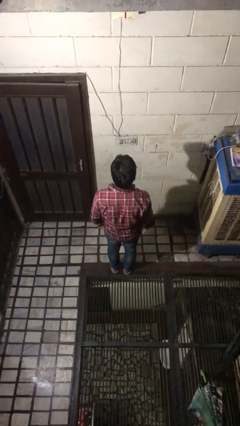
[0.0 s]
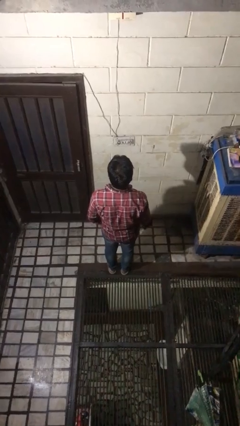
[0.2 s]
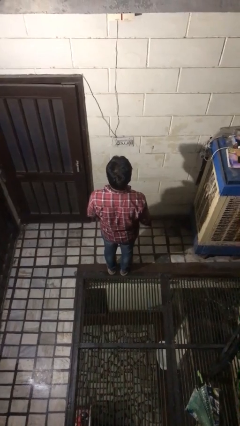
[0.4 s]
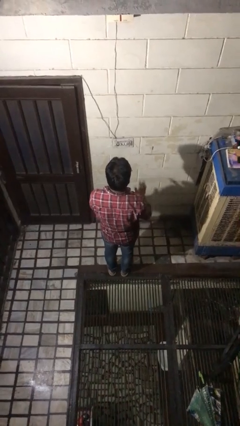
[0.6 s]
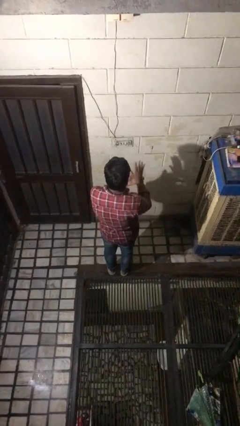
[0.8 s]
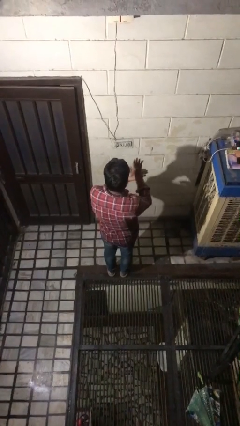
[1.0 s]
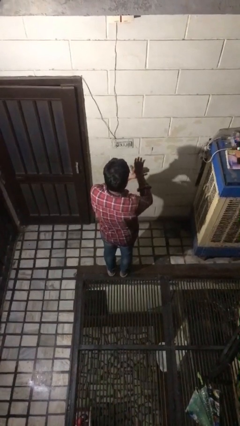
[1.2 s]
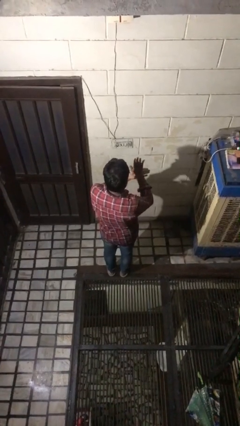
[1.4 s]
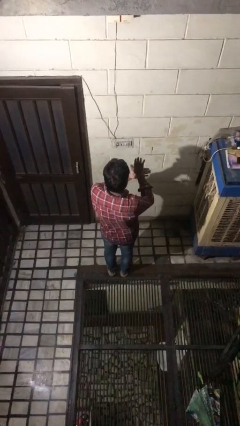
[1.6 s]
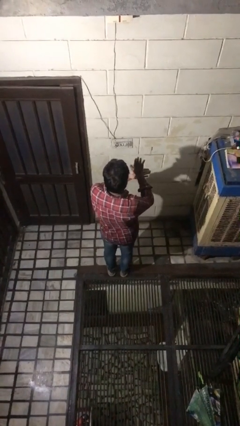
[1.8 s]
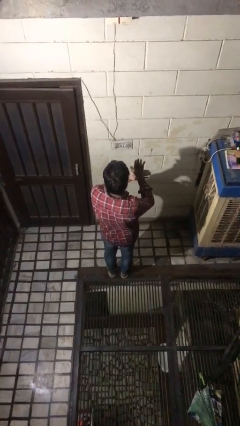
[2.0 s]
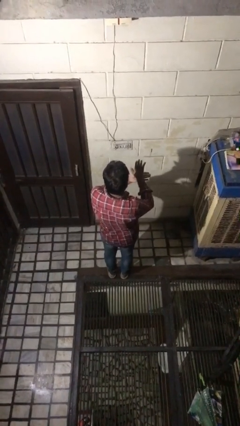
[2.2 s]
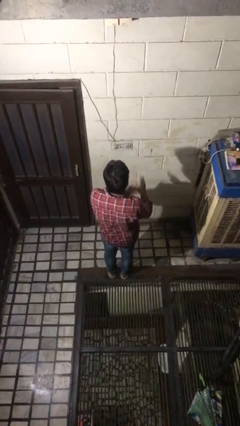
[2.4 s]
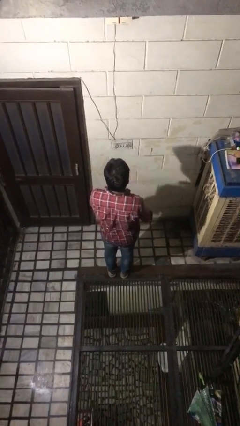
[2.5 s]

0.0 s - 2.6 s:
person gestures number five

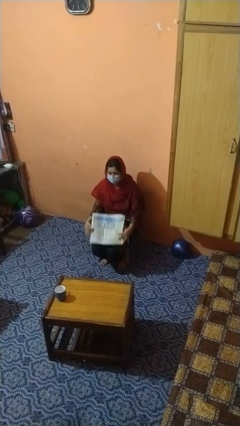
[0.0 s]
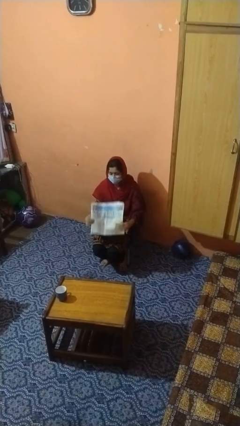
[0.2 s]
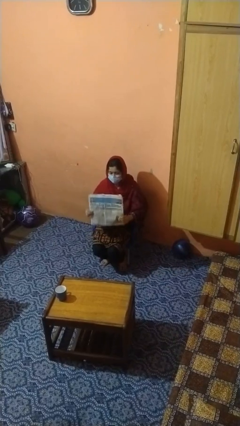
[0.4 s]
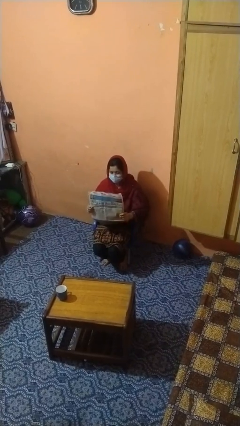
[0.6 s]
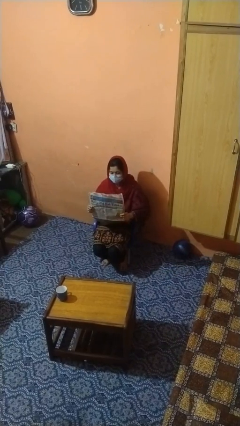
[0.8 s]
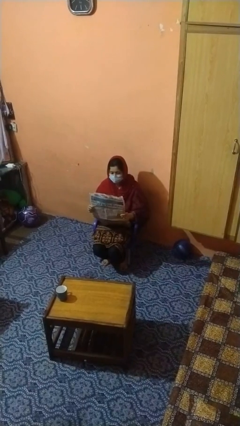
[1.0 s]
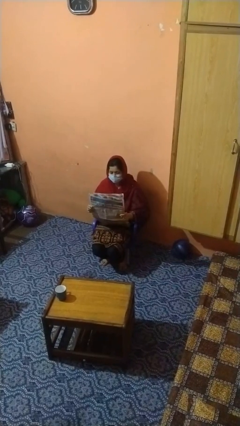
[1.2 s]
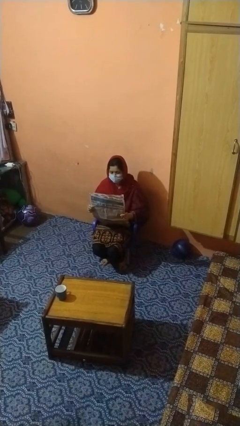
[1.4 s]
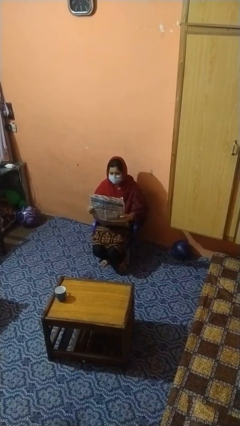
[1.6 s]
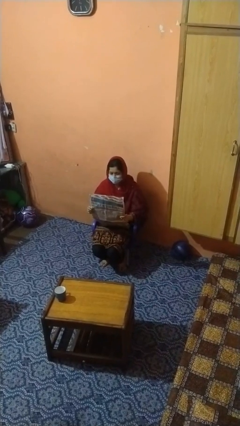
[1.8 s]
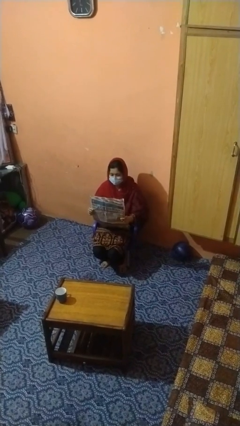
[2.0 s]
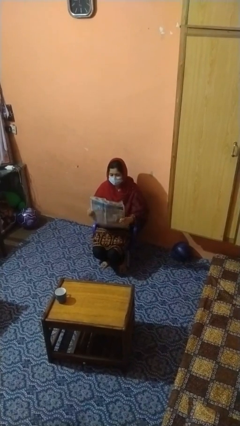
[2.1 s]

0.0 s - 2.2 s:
person reads newspaper

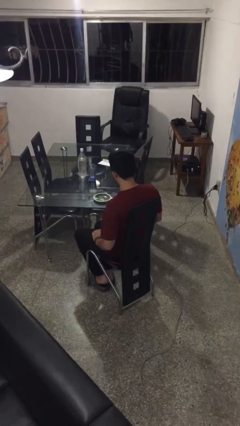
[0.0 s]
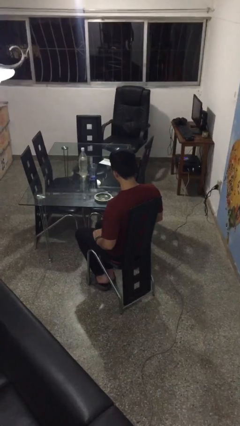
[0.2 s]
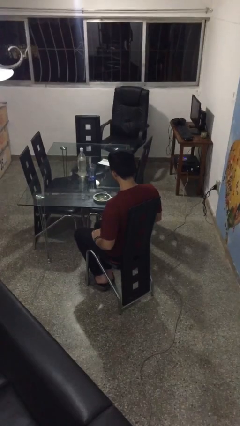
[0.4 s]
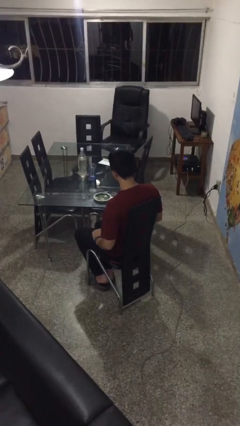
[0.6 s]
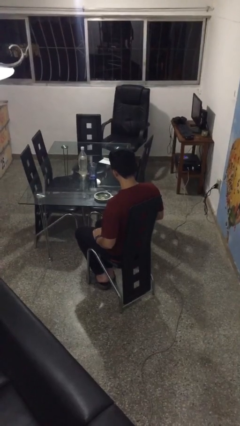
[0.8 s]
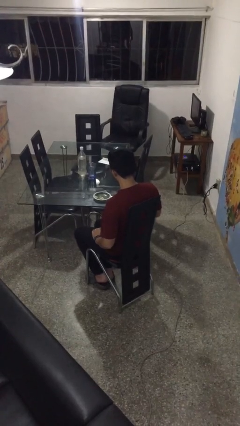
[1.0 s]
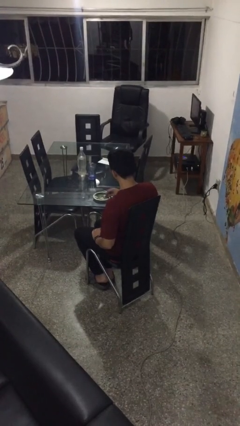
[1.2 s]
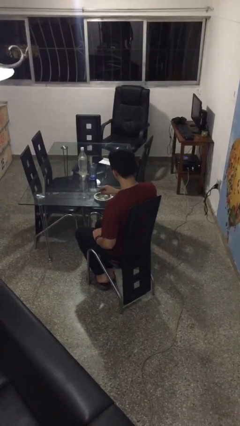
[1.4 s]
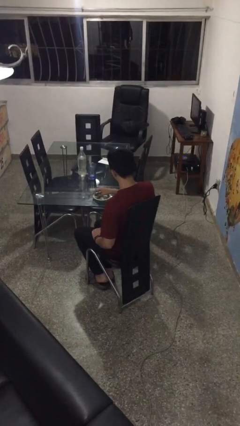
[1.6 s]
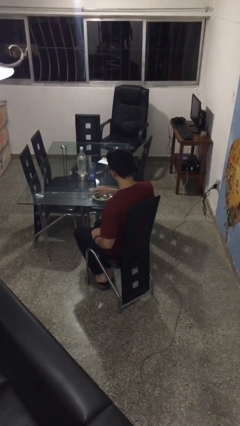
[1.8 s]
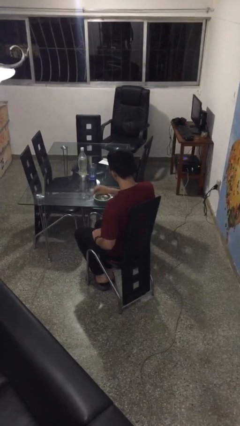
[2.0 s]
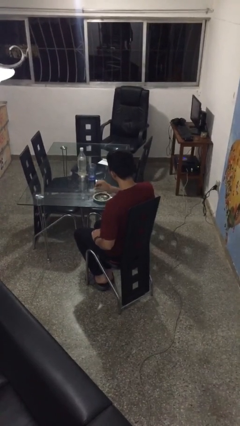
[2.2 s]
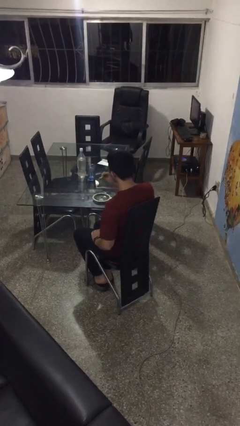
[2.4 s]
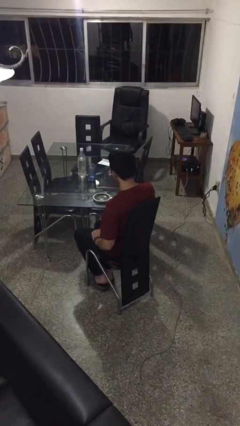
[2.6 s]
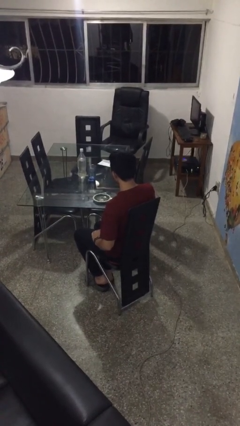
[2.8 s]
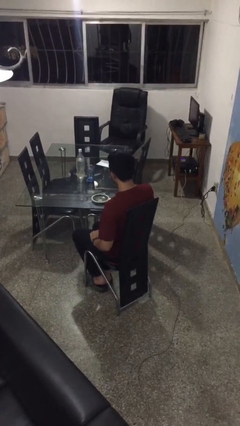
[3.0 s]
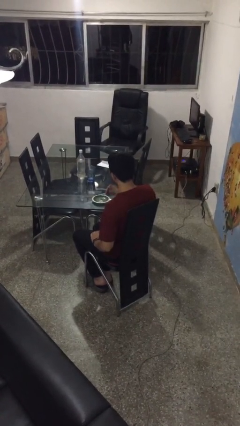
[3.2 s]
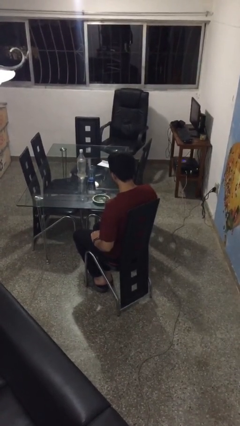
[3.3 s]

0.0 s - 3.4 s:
person eats with hands

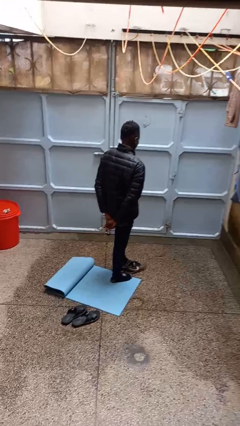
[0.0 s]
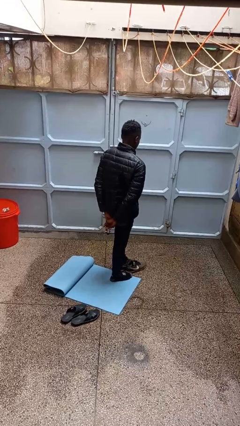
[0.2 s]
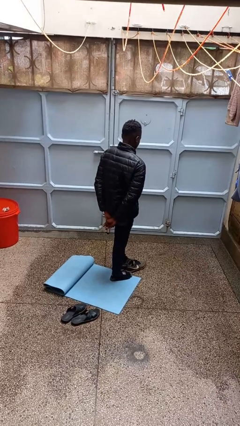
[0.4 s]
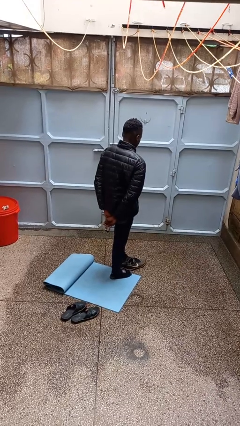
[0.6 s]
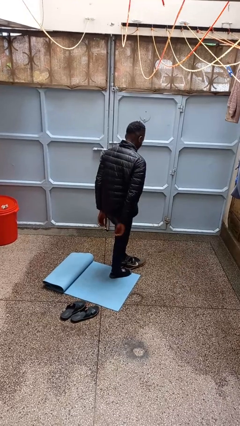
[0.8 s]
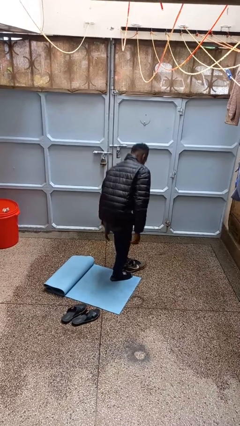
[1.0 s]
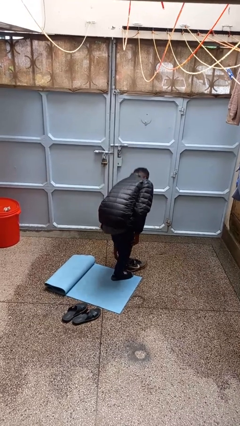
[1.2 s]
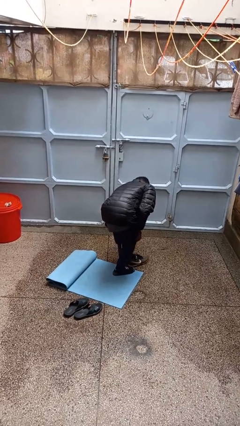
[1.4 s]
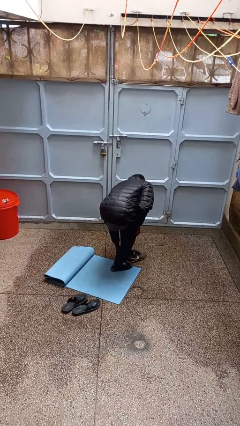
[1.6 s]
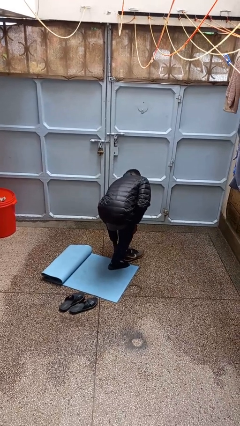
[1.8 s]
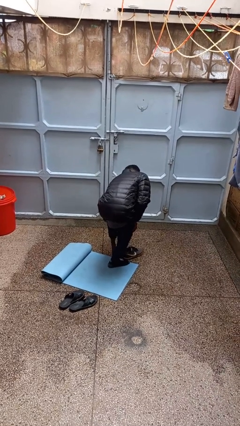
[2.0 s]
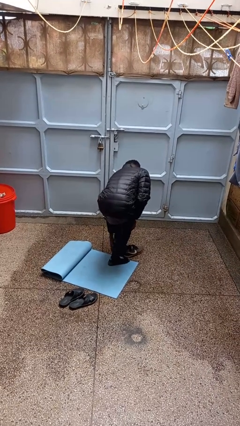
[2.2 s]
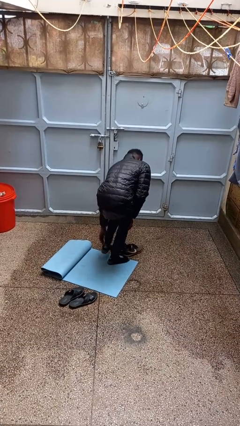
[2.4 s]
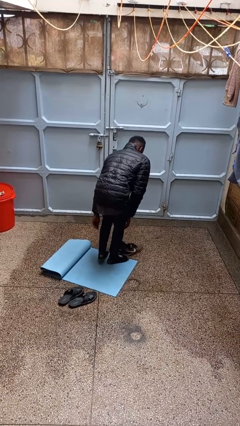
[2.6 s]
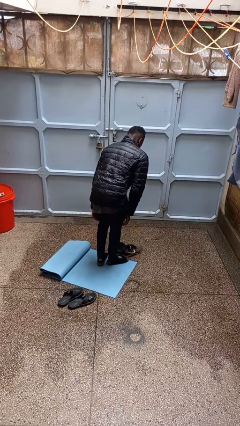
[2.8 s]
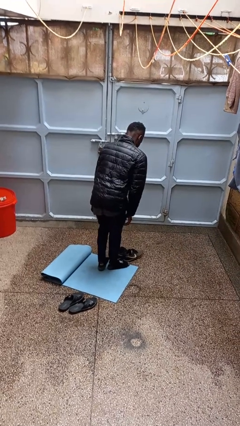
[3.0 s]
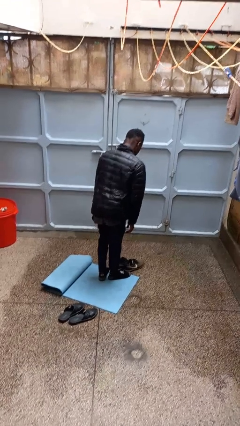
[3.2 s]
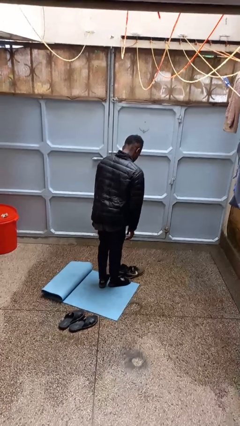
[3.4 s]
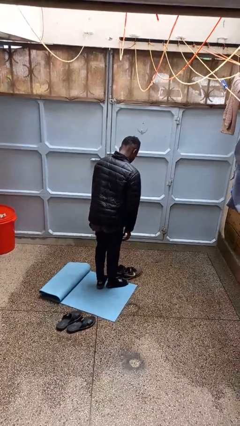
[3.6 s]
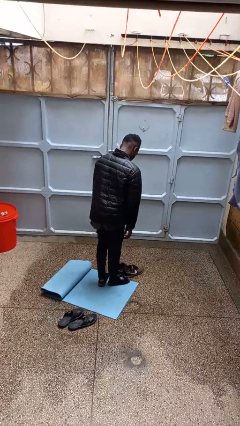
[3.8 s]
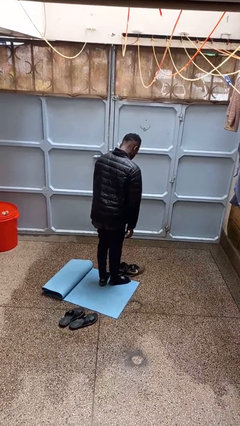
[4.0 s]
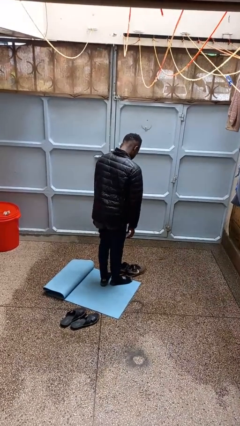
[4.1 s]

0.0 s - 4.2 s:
person takes off shoes

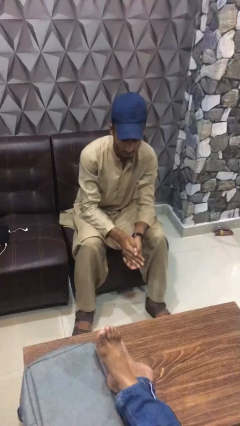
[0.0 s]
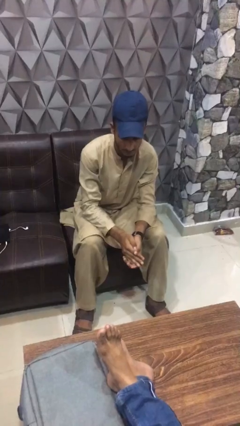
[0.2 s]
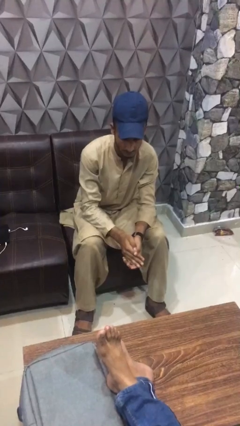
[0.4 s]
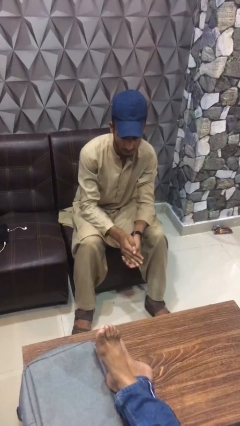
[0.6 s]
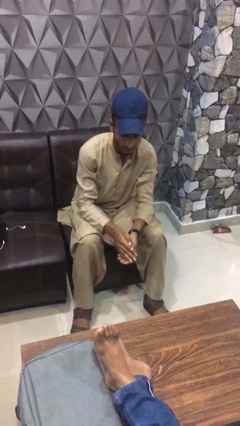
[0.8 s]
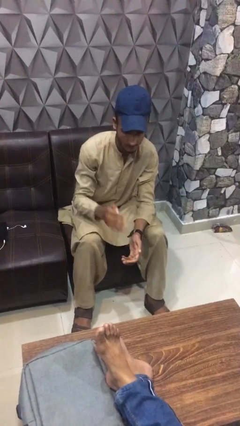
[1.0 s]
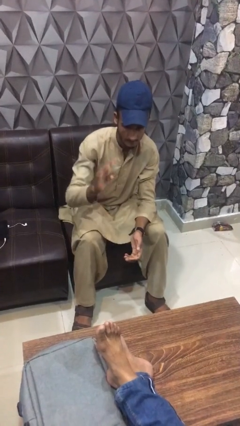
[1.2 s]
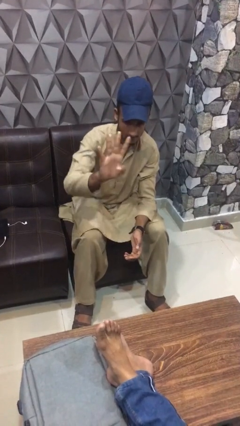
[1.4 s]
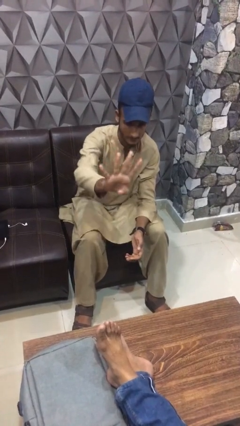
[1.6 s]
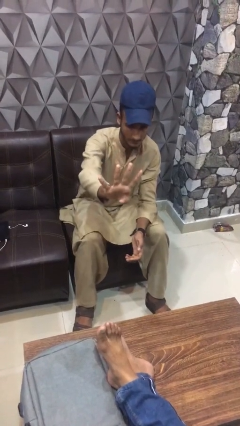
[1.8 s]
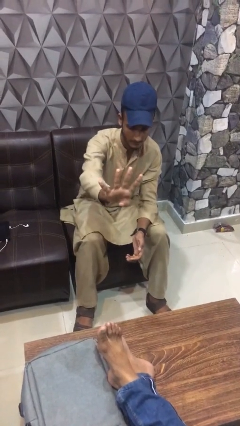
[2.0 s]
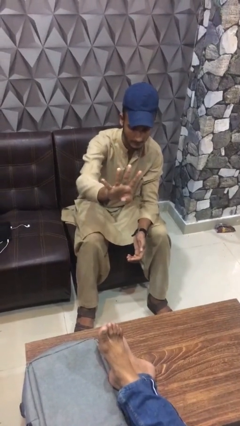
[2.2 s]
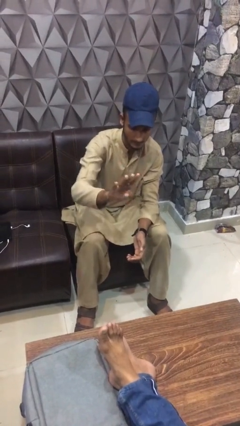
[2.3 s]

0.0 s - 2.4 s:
person gestures number four

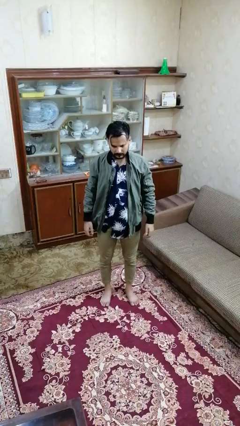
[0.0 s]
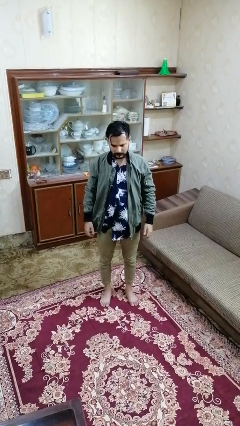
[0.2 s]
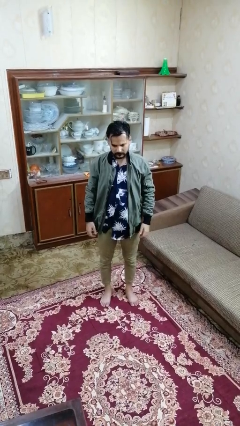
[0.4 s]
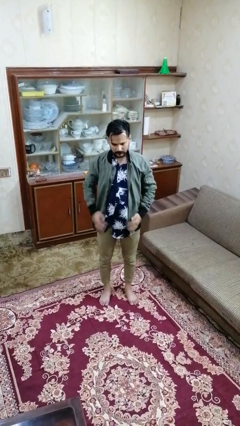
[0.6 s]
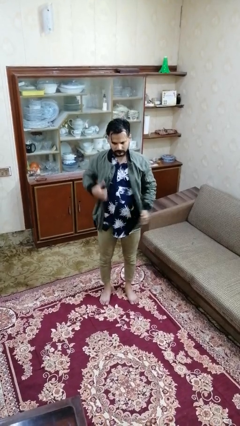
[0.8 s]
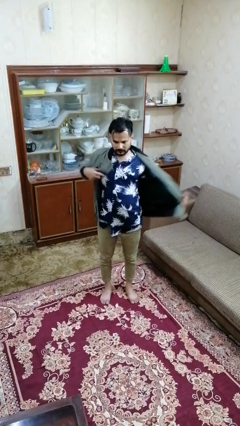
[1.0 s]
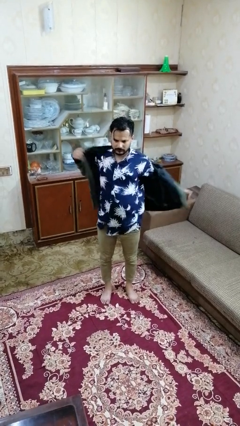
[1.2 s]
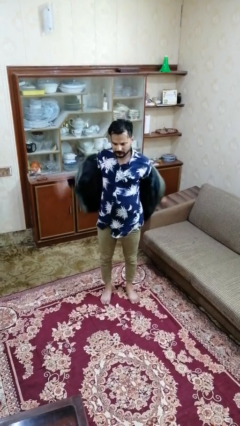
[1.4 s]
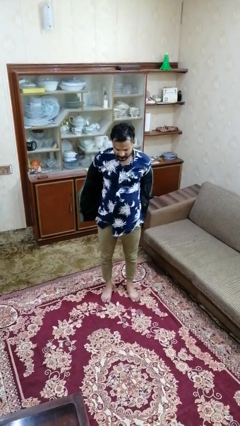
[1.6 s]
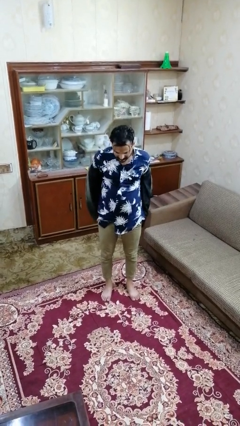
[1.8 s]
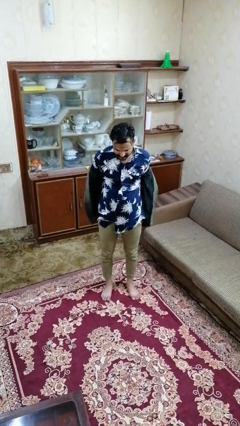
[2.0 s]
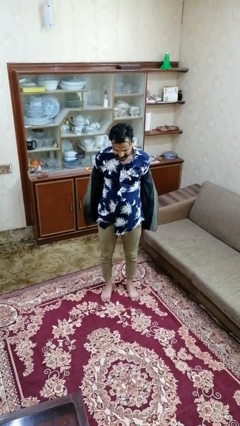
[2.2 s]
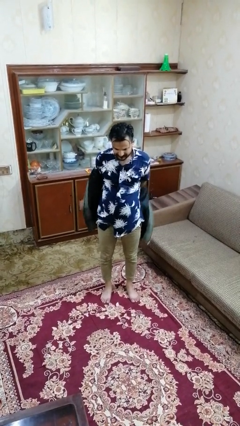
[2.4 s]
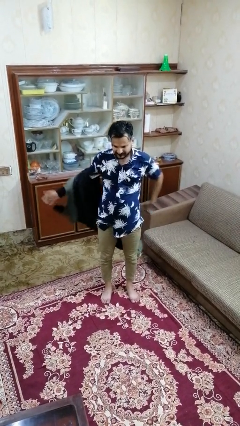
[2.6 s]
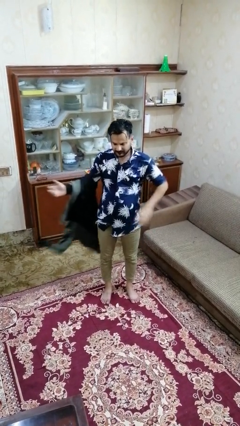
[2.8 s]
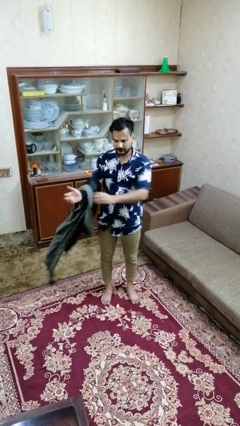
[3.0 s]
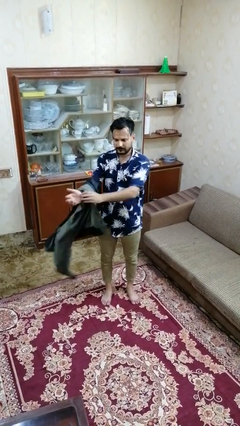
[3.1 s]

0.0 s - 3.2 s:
person takes off jacket
